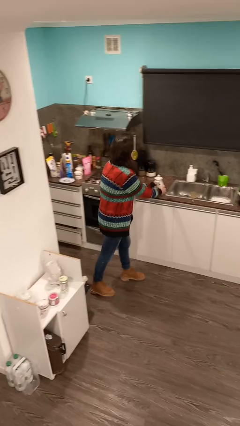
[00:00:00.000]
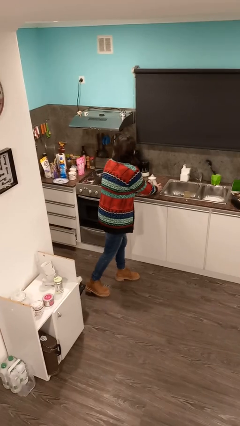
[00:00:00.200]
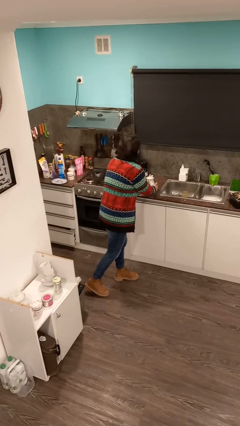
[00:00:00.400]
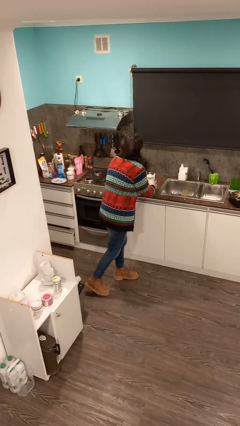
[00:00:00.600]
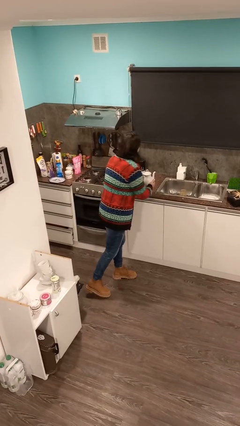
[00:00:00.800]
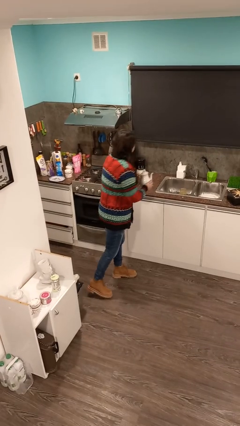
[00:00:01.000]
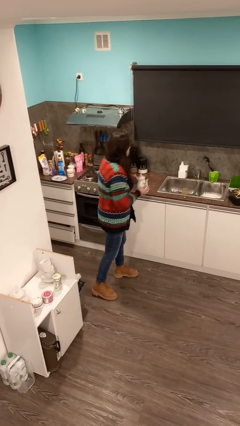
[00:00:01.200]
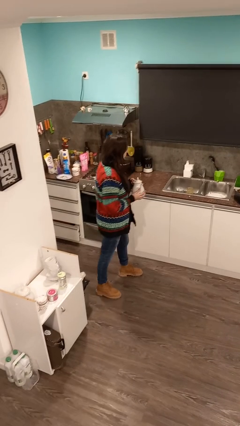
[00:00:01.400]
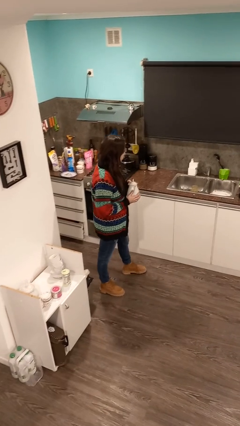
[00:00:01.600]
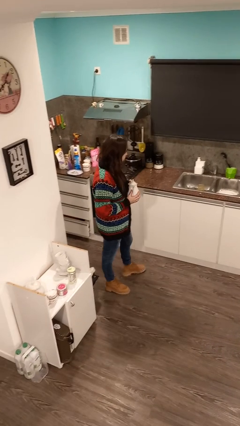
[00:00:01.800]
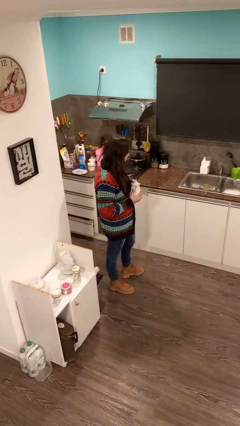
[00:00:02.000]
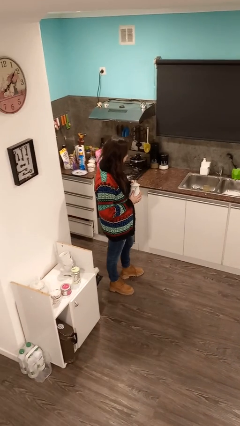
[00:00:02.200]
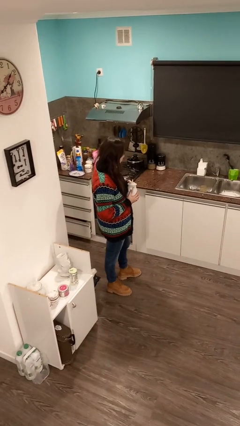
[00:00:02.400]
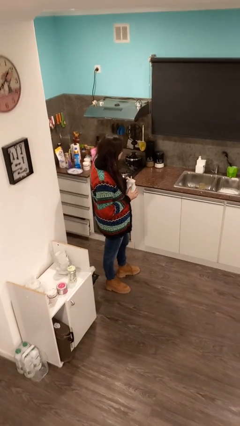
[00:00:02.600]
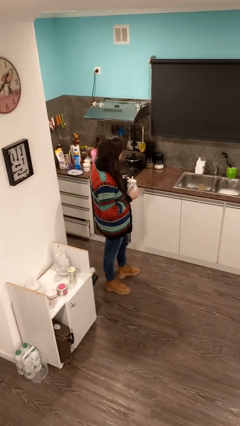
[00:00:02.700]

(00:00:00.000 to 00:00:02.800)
person picks up object from countertop

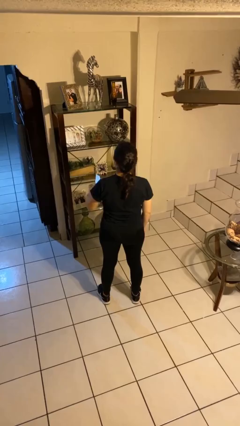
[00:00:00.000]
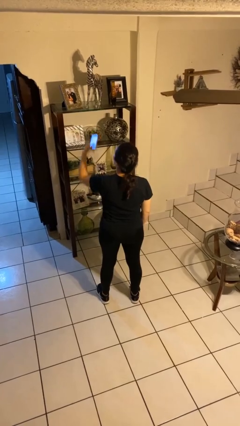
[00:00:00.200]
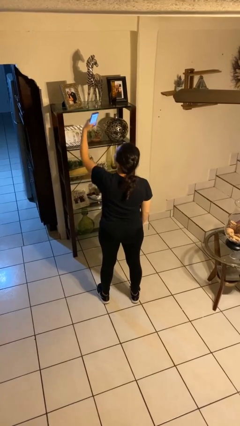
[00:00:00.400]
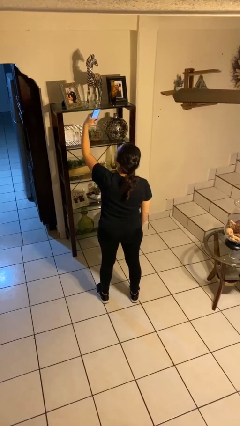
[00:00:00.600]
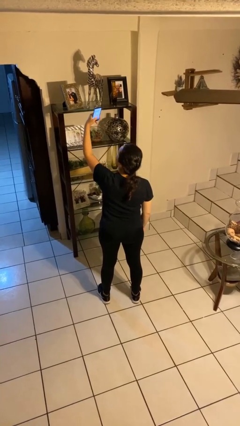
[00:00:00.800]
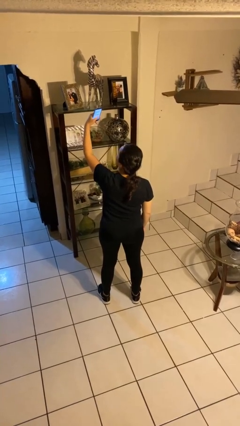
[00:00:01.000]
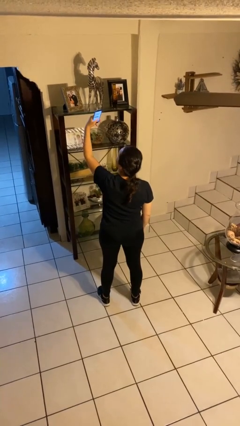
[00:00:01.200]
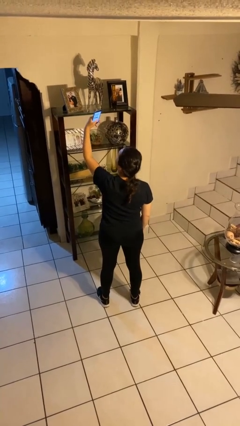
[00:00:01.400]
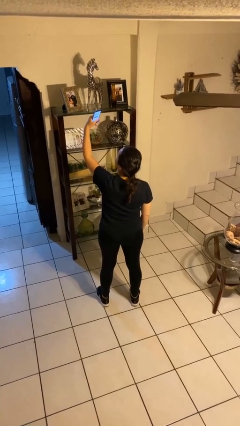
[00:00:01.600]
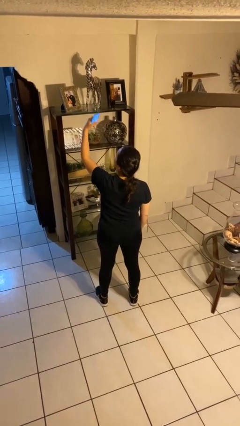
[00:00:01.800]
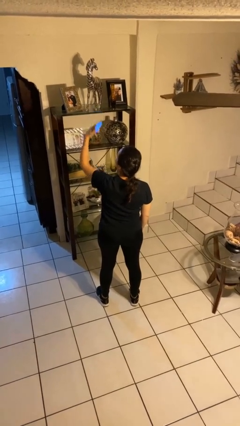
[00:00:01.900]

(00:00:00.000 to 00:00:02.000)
person takes selfie

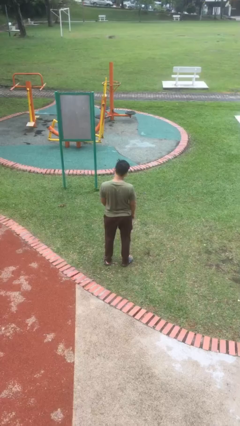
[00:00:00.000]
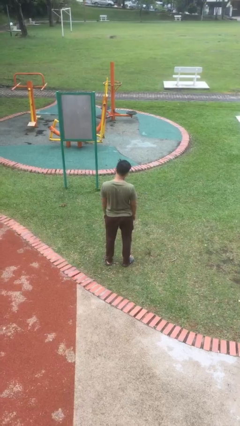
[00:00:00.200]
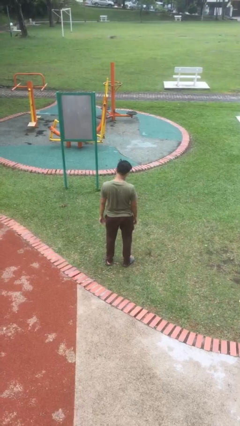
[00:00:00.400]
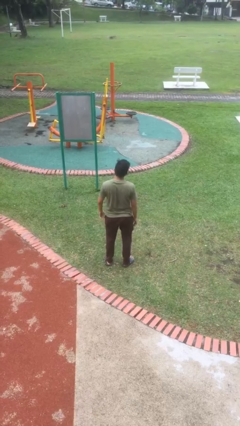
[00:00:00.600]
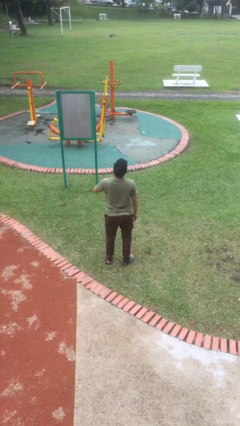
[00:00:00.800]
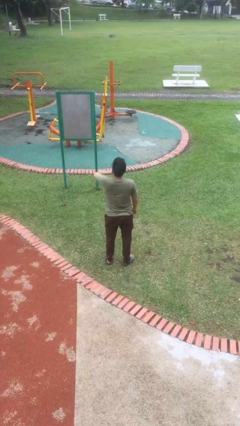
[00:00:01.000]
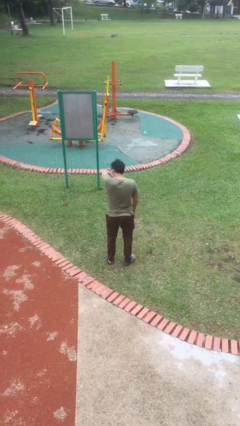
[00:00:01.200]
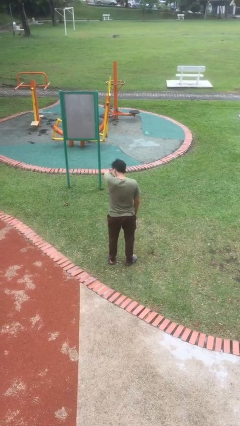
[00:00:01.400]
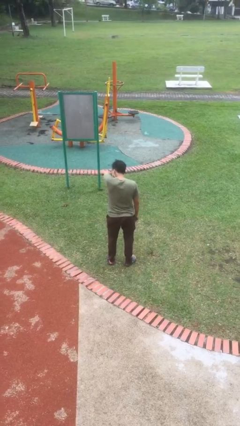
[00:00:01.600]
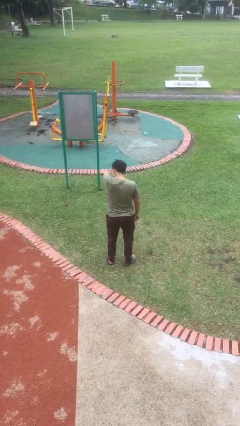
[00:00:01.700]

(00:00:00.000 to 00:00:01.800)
person sneezes into arm

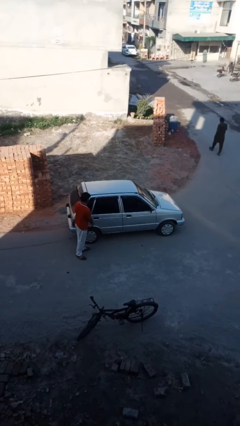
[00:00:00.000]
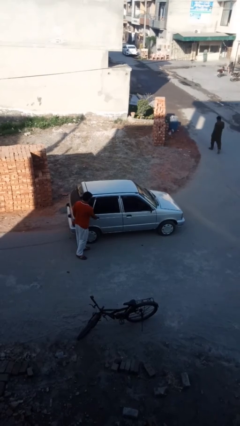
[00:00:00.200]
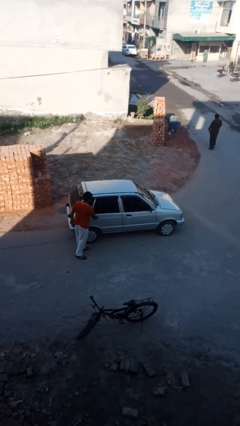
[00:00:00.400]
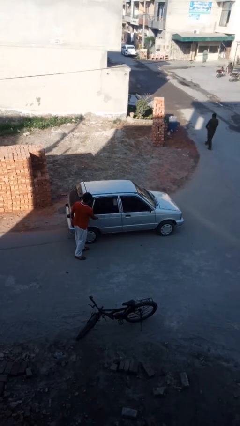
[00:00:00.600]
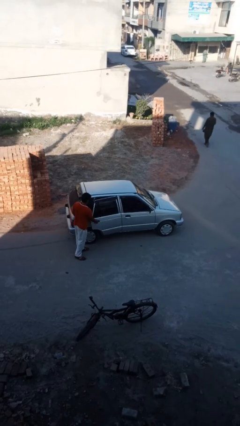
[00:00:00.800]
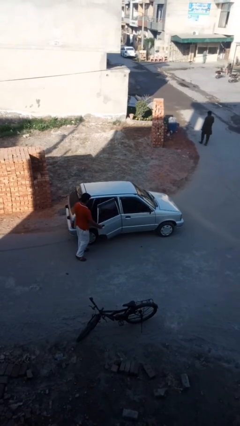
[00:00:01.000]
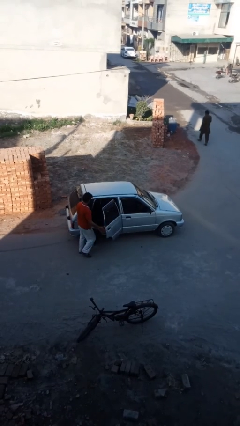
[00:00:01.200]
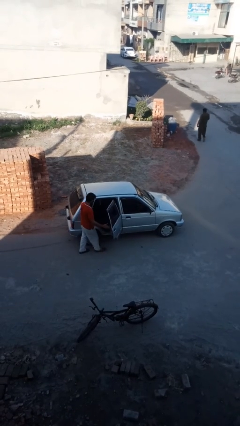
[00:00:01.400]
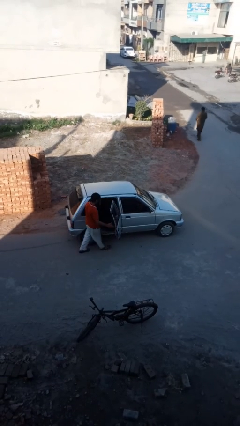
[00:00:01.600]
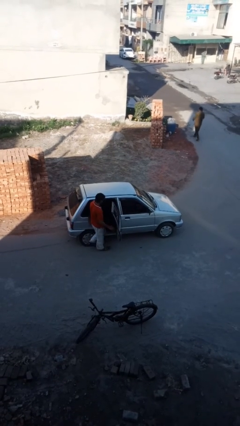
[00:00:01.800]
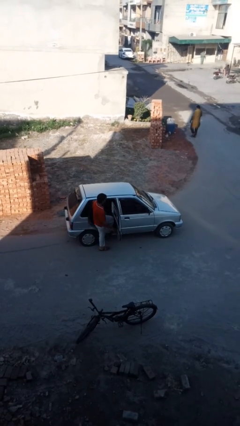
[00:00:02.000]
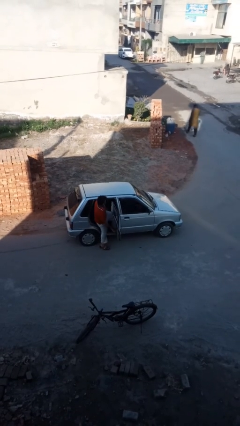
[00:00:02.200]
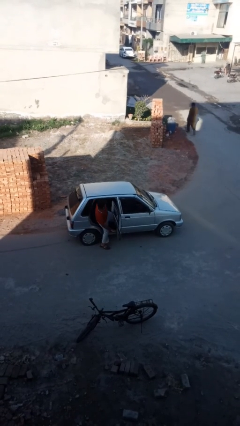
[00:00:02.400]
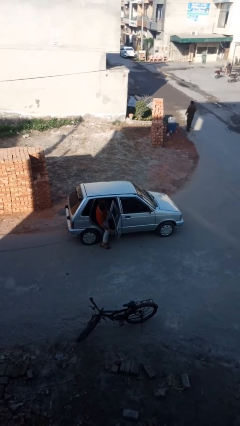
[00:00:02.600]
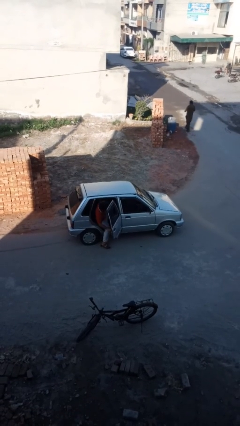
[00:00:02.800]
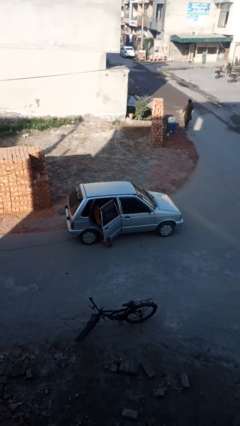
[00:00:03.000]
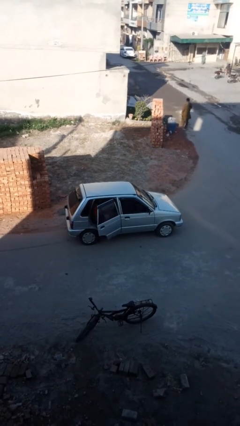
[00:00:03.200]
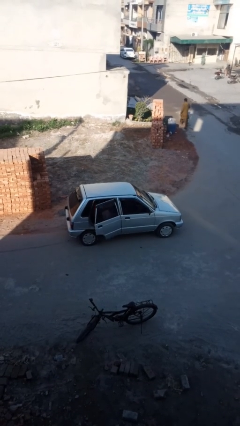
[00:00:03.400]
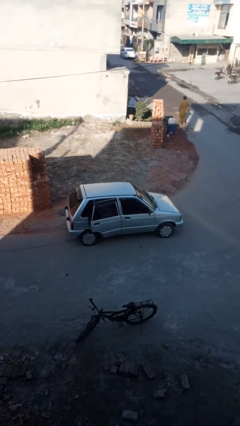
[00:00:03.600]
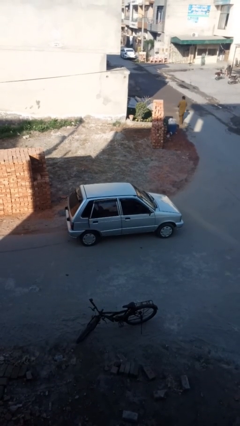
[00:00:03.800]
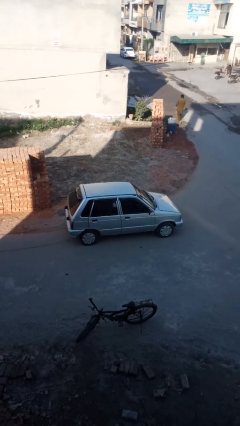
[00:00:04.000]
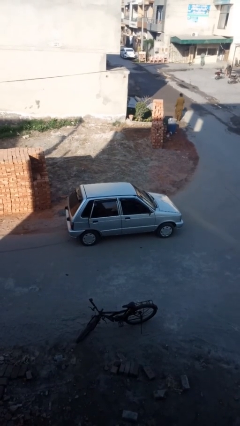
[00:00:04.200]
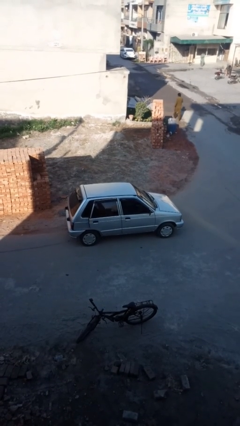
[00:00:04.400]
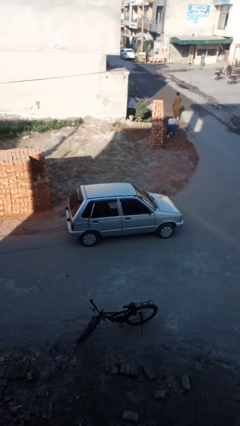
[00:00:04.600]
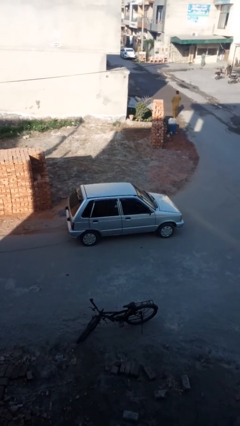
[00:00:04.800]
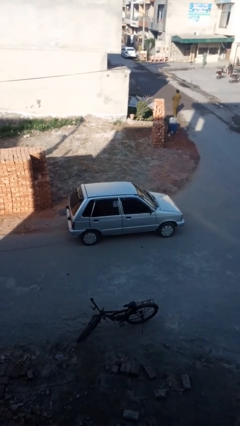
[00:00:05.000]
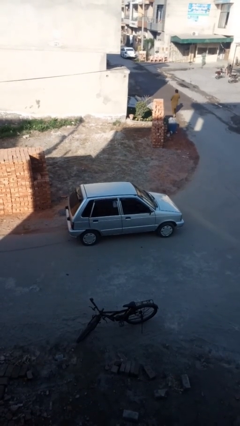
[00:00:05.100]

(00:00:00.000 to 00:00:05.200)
car picks up person

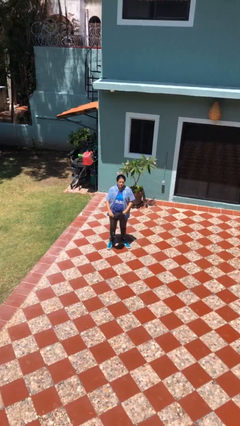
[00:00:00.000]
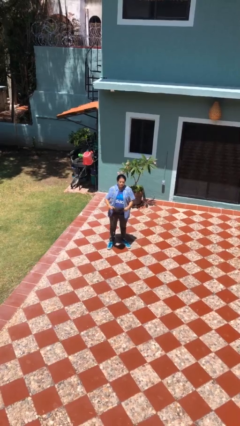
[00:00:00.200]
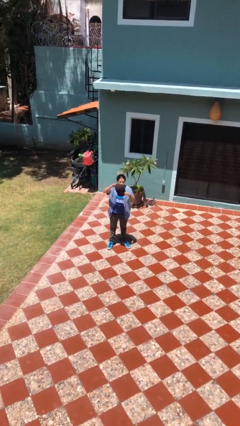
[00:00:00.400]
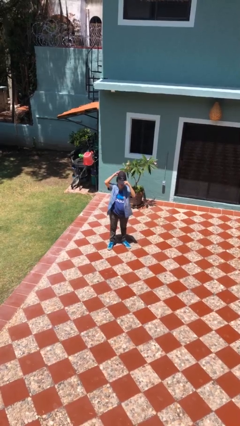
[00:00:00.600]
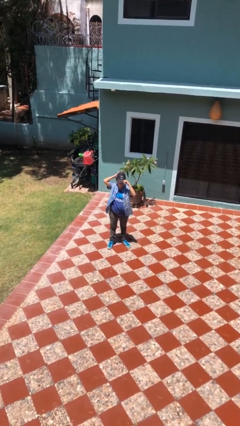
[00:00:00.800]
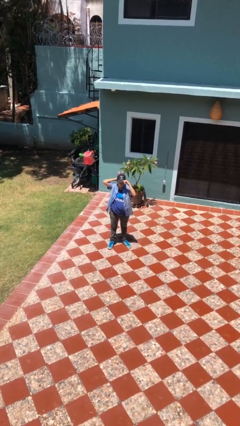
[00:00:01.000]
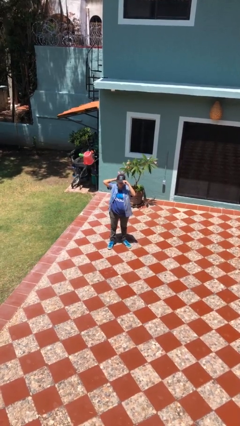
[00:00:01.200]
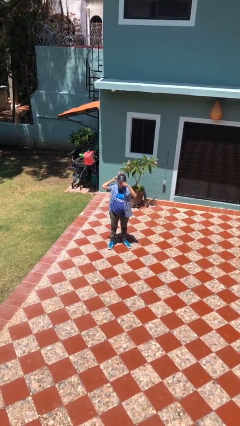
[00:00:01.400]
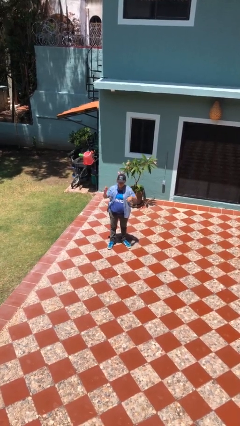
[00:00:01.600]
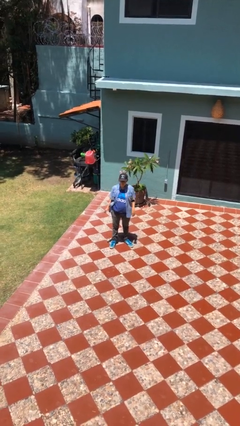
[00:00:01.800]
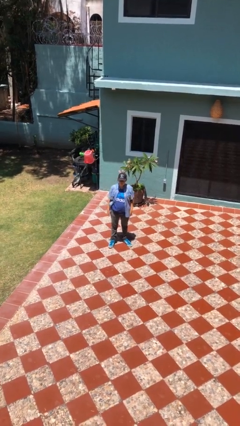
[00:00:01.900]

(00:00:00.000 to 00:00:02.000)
person puts on hat

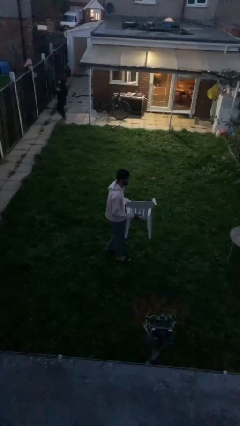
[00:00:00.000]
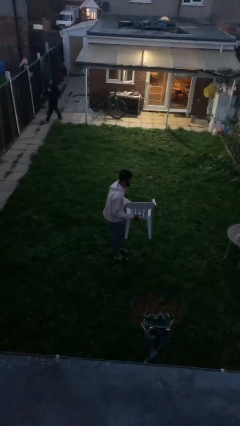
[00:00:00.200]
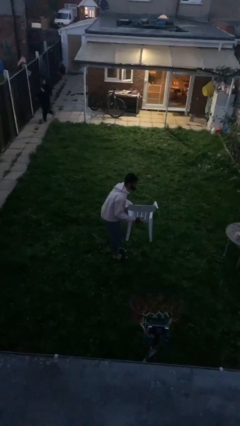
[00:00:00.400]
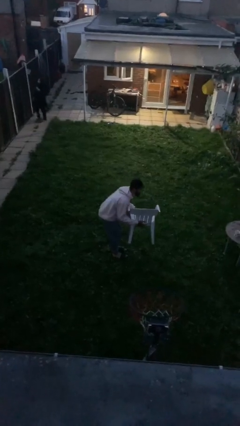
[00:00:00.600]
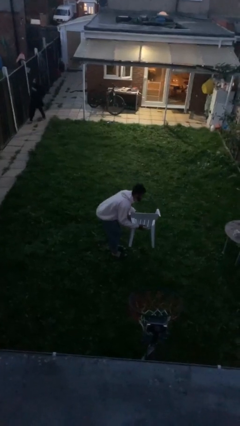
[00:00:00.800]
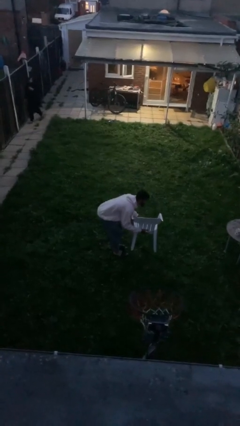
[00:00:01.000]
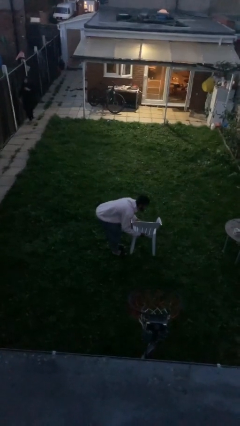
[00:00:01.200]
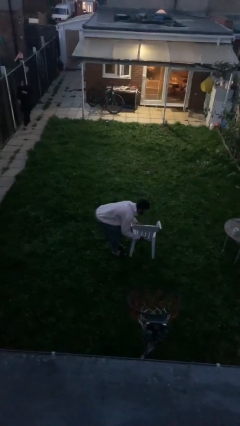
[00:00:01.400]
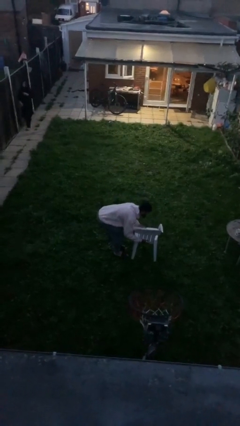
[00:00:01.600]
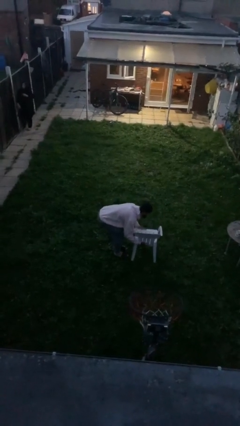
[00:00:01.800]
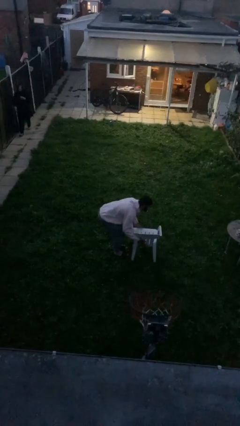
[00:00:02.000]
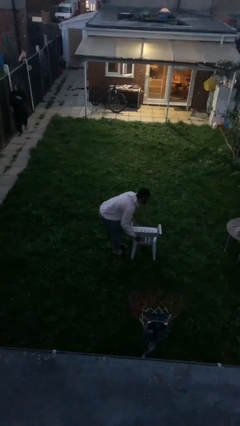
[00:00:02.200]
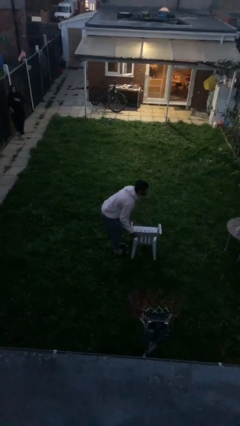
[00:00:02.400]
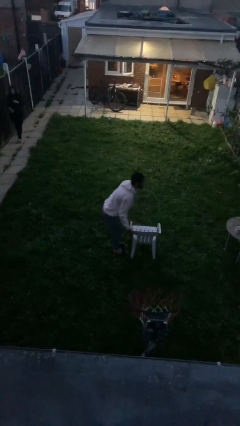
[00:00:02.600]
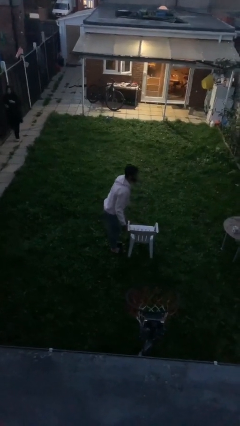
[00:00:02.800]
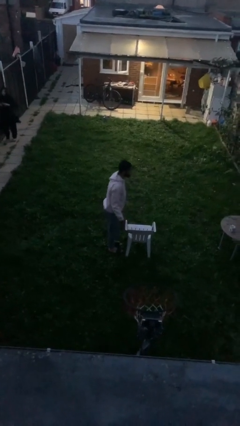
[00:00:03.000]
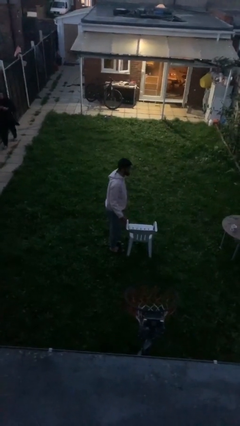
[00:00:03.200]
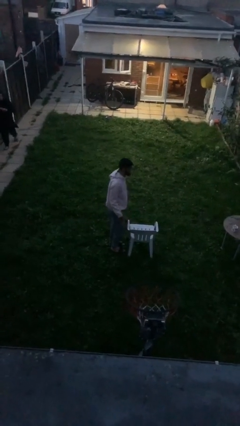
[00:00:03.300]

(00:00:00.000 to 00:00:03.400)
person puts down object on floor
